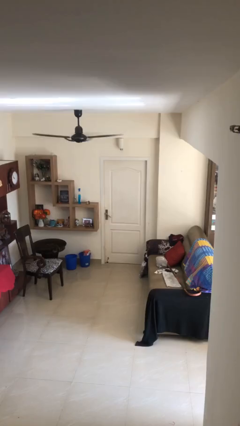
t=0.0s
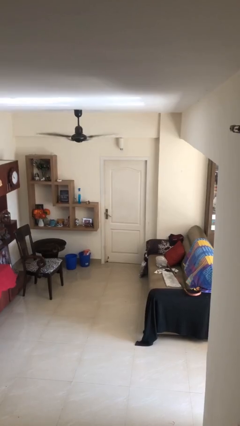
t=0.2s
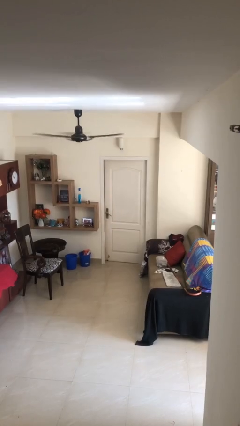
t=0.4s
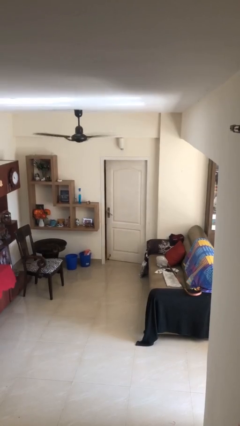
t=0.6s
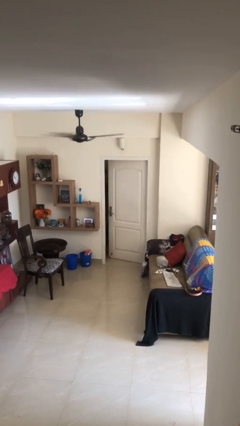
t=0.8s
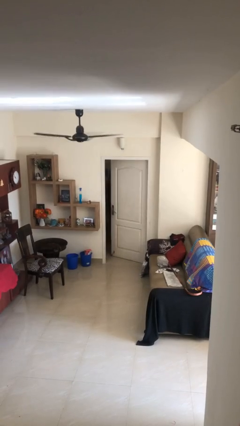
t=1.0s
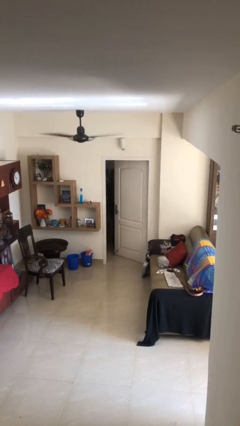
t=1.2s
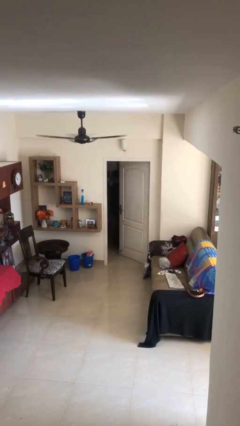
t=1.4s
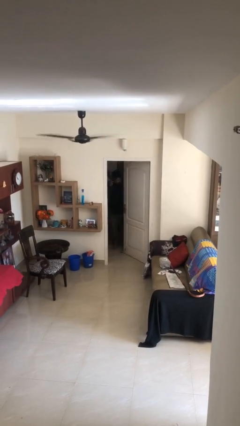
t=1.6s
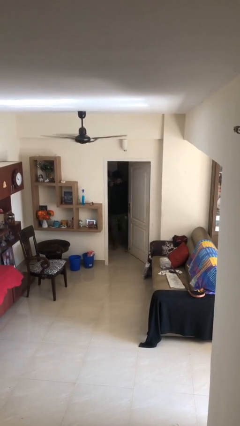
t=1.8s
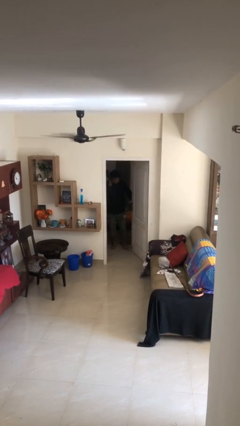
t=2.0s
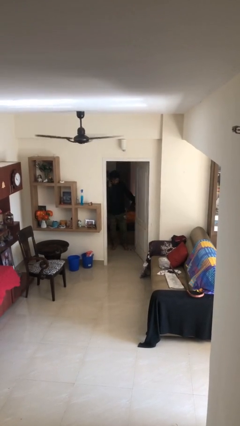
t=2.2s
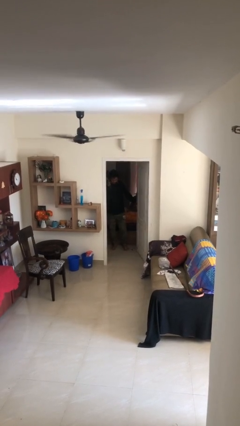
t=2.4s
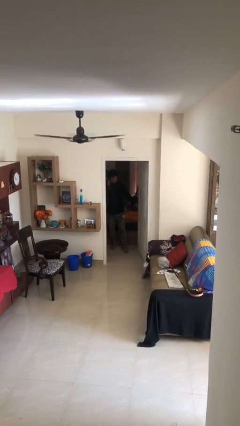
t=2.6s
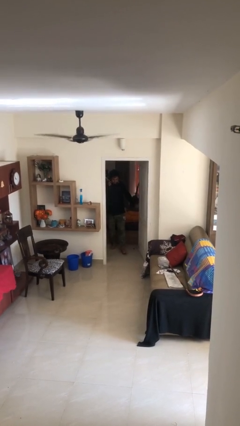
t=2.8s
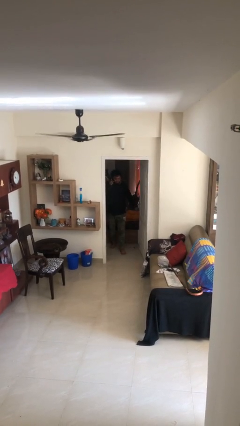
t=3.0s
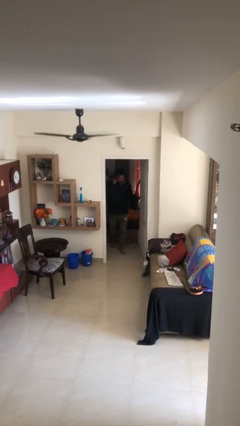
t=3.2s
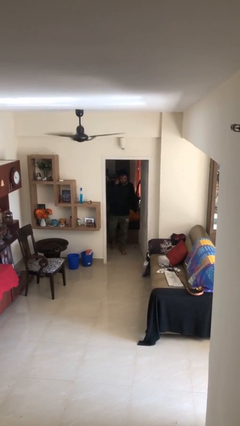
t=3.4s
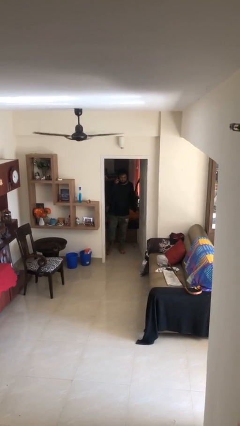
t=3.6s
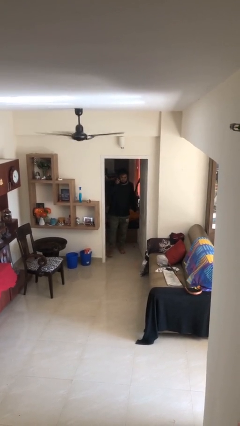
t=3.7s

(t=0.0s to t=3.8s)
person opens facility door

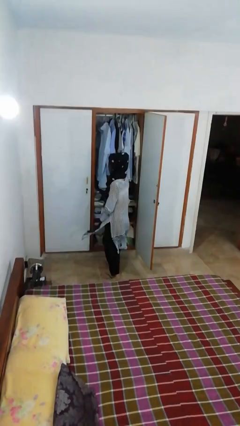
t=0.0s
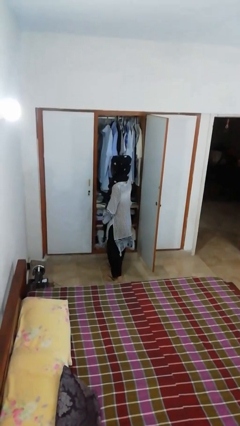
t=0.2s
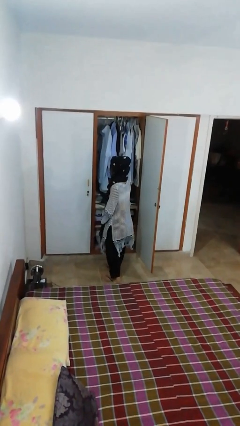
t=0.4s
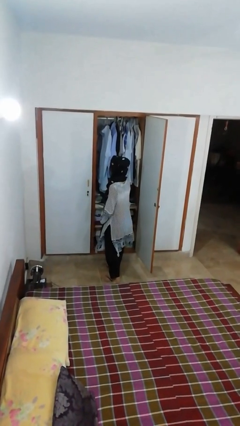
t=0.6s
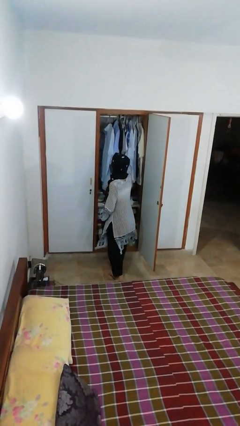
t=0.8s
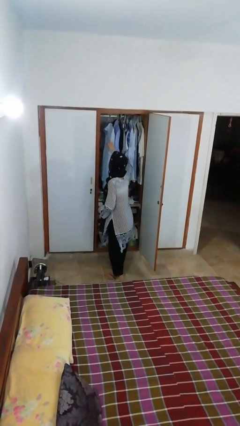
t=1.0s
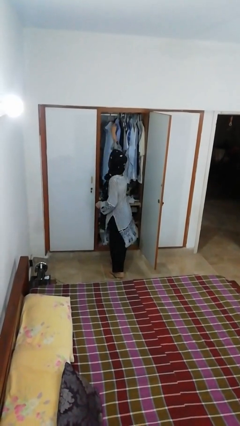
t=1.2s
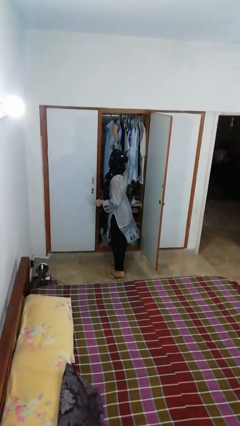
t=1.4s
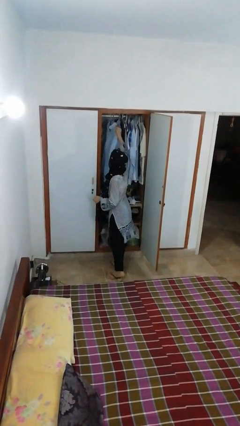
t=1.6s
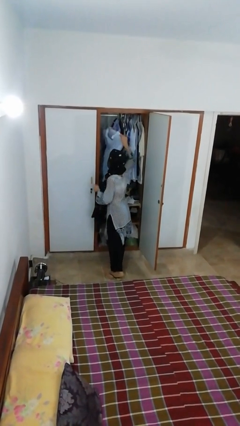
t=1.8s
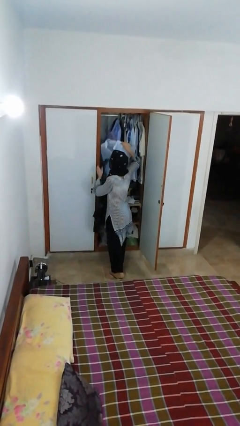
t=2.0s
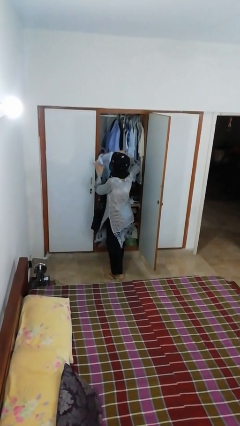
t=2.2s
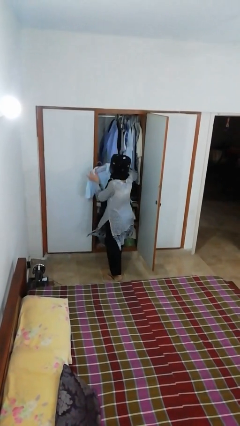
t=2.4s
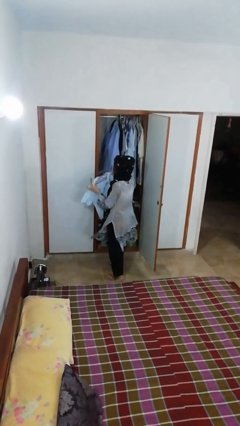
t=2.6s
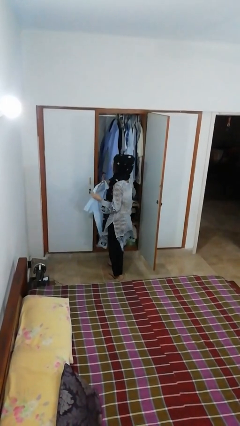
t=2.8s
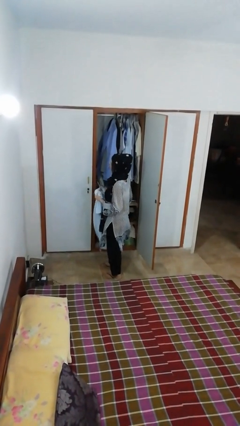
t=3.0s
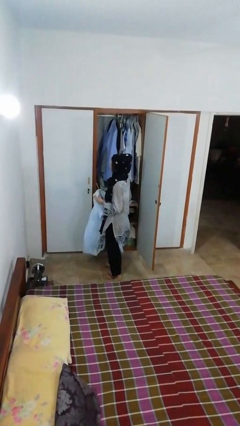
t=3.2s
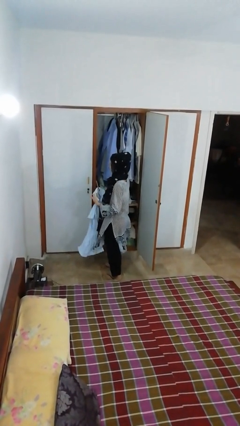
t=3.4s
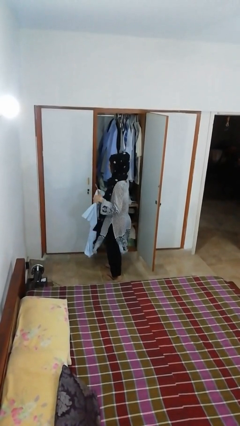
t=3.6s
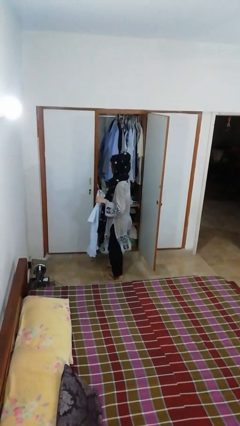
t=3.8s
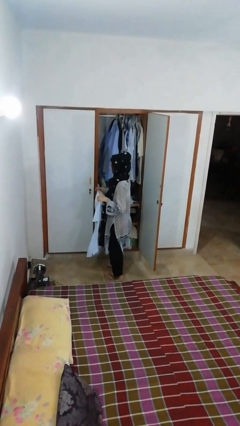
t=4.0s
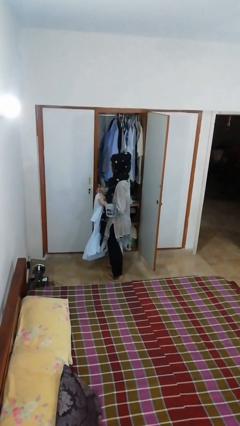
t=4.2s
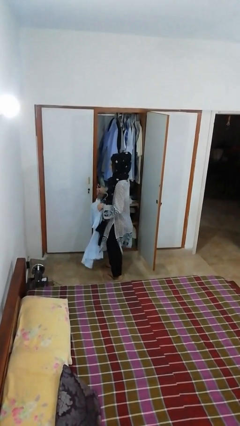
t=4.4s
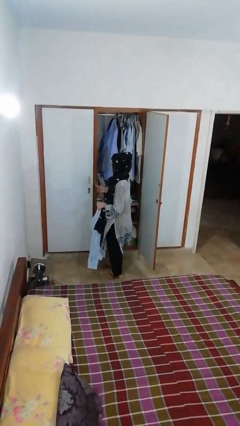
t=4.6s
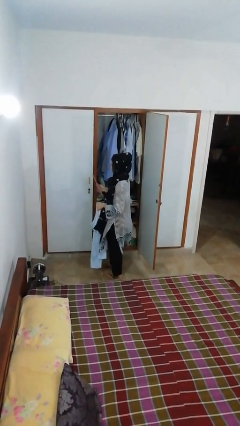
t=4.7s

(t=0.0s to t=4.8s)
person takes clothes from closet

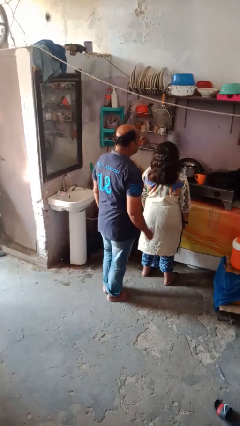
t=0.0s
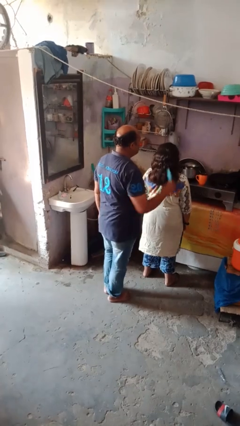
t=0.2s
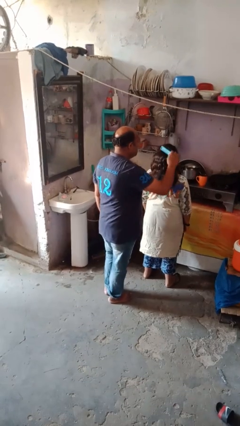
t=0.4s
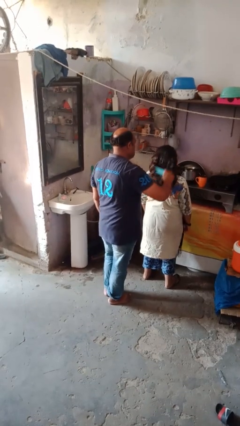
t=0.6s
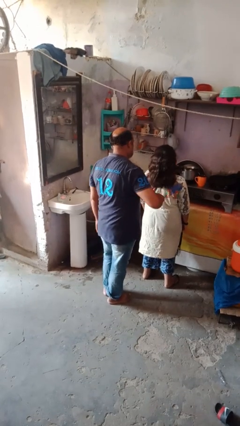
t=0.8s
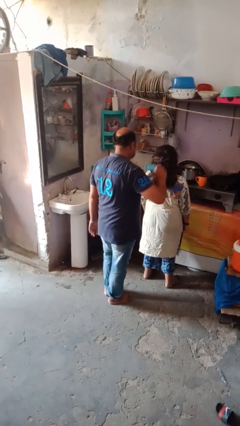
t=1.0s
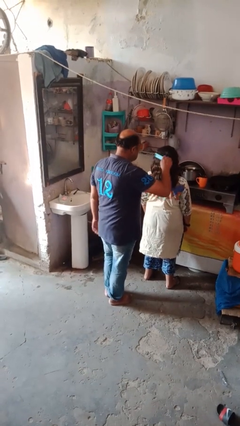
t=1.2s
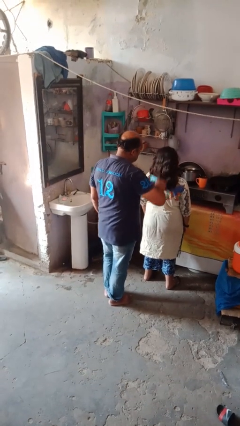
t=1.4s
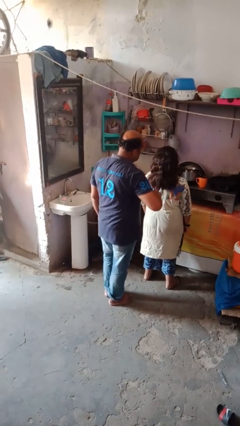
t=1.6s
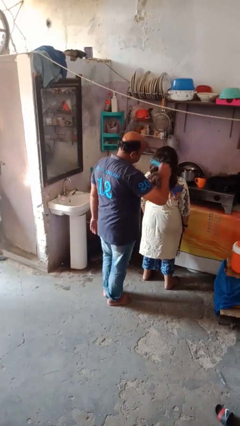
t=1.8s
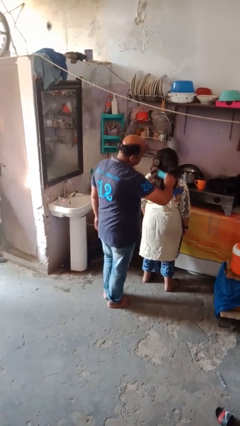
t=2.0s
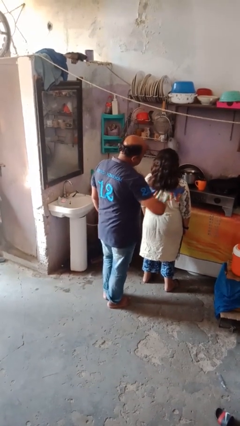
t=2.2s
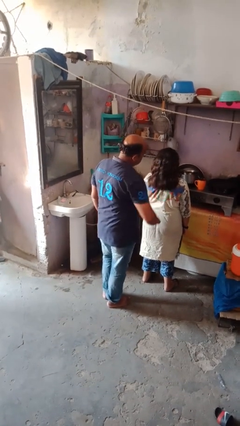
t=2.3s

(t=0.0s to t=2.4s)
person brushes hair of person

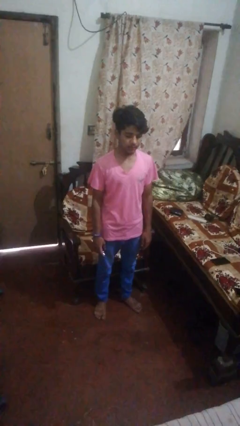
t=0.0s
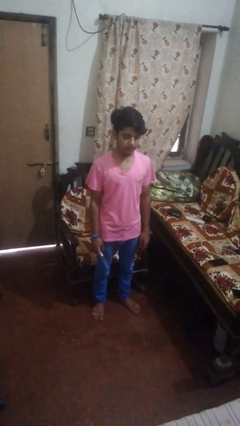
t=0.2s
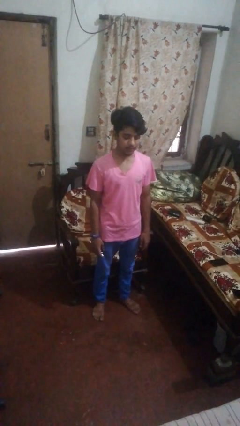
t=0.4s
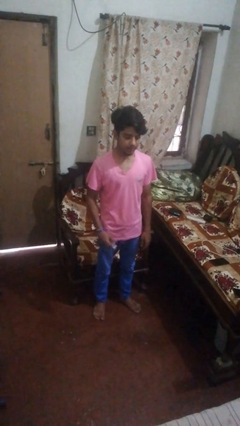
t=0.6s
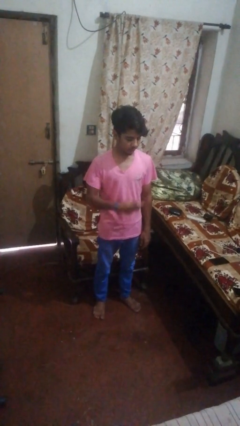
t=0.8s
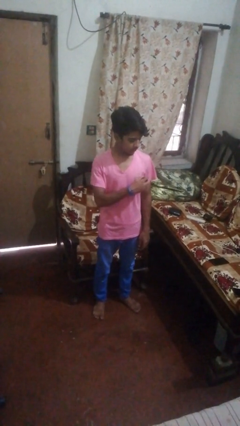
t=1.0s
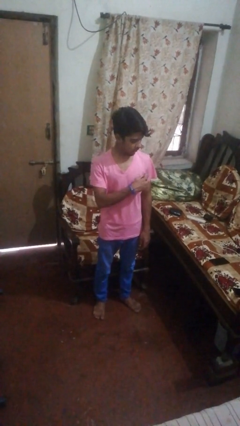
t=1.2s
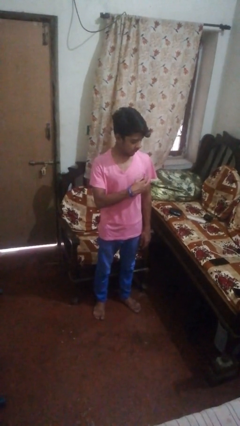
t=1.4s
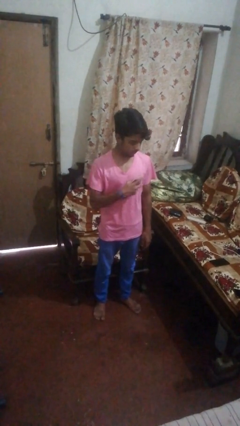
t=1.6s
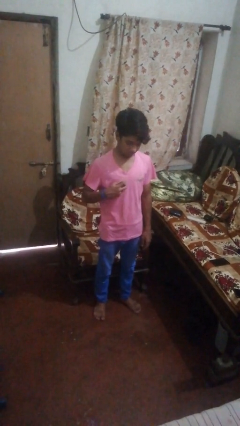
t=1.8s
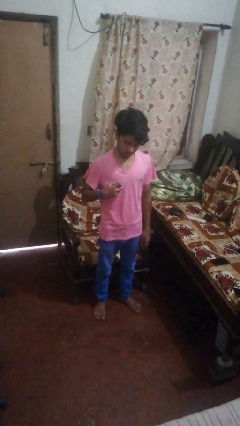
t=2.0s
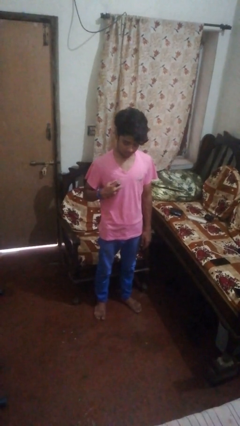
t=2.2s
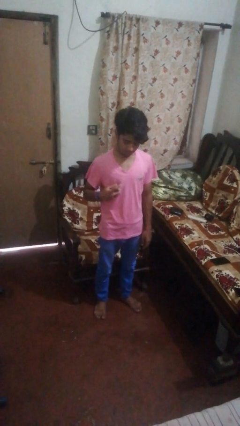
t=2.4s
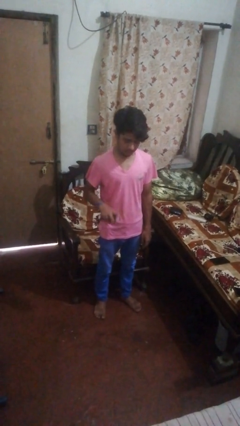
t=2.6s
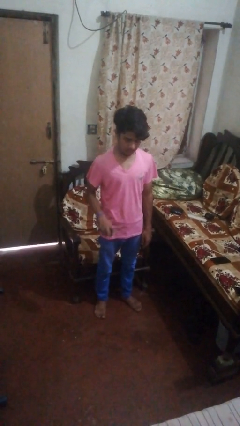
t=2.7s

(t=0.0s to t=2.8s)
person applies deodorant

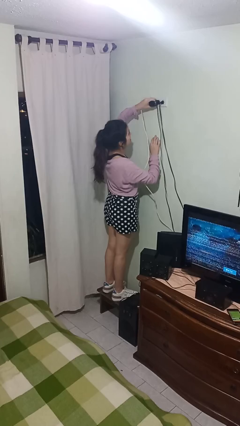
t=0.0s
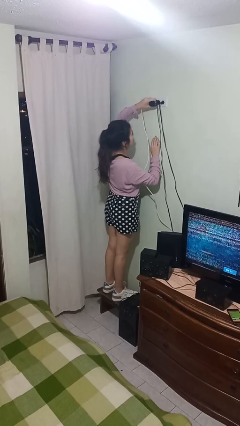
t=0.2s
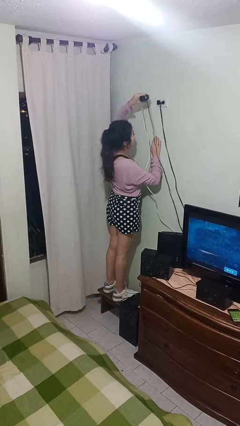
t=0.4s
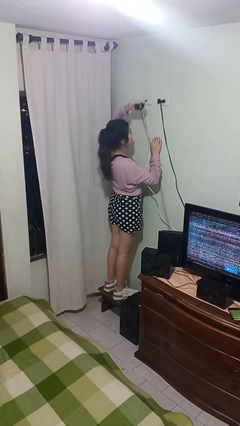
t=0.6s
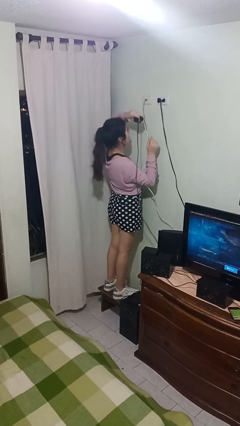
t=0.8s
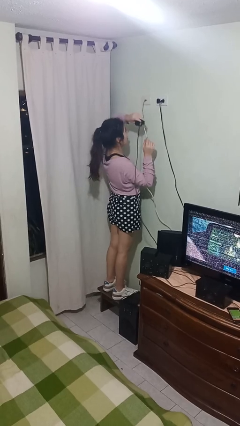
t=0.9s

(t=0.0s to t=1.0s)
person unplugs from electrical socket

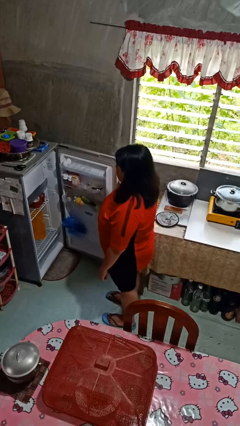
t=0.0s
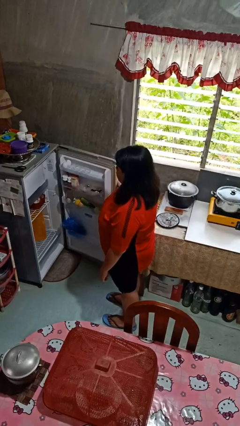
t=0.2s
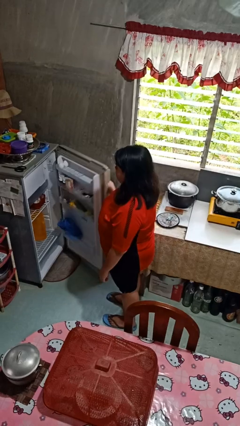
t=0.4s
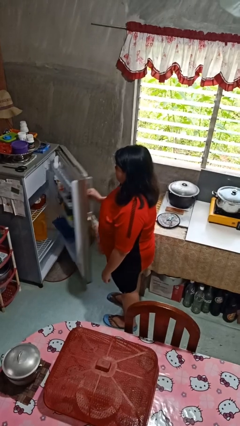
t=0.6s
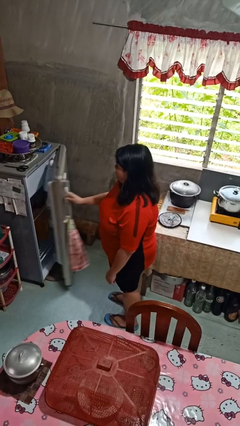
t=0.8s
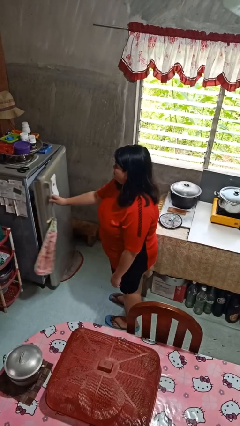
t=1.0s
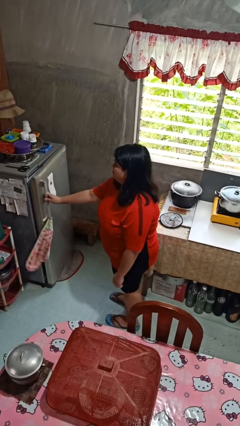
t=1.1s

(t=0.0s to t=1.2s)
person closes refrigerator

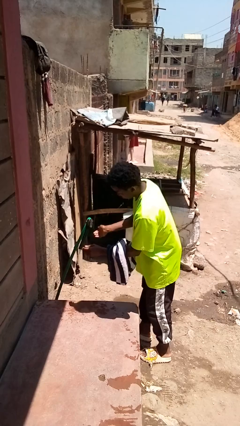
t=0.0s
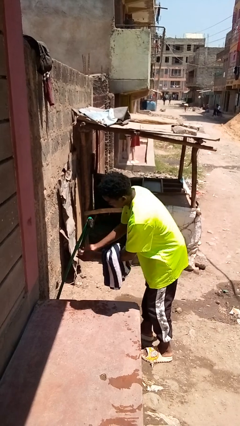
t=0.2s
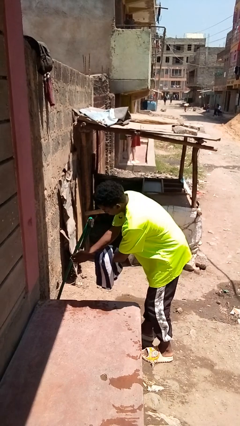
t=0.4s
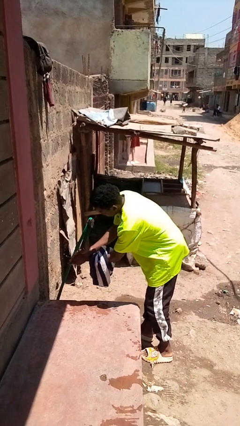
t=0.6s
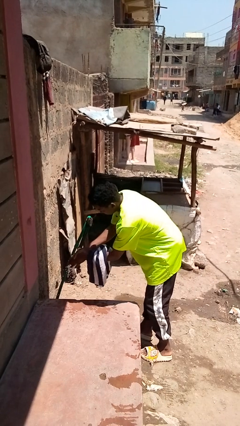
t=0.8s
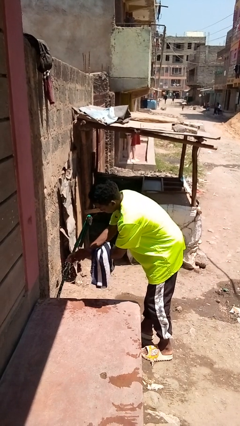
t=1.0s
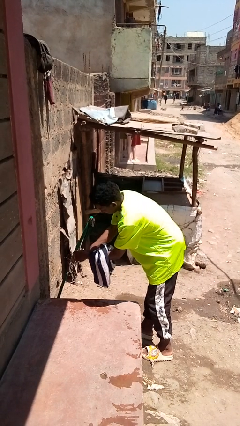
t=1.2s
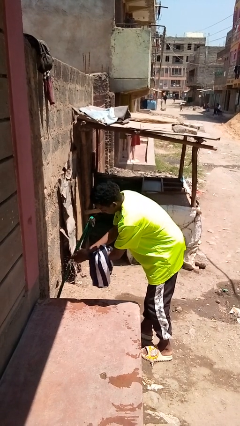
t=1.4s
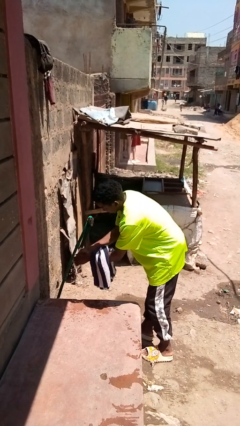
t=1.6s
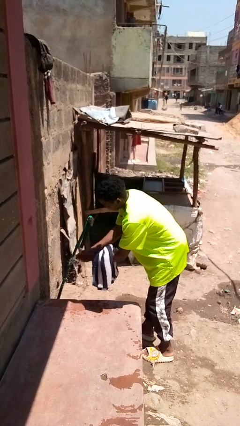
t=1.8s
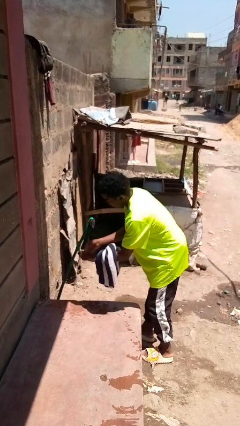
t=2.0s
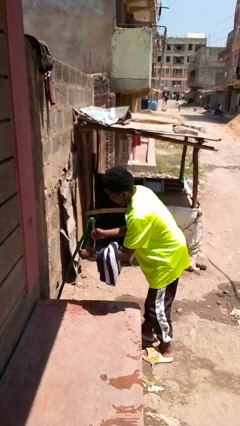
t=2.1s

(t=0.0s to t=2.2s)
person washes hands
